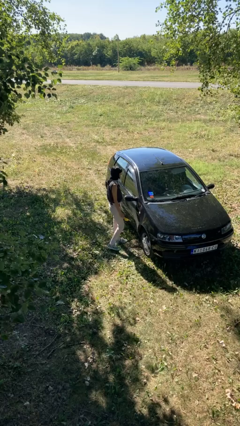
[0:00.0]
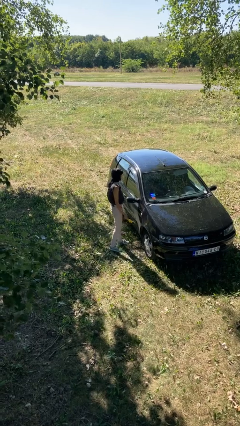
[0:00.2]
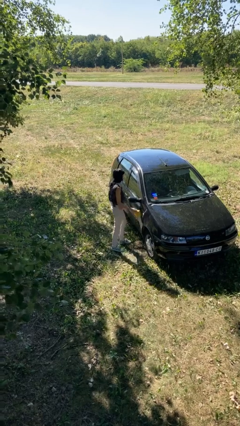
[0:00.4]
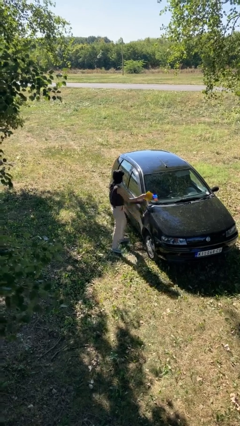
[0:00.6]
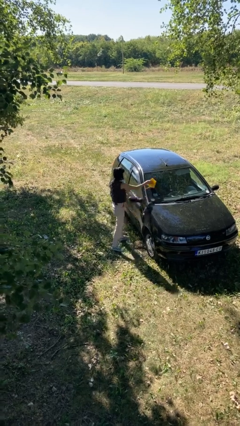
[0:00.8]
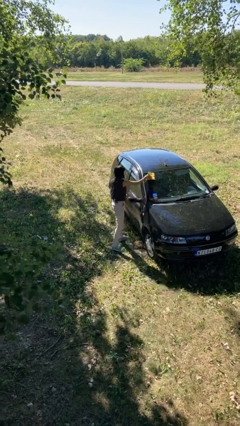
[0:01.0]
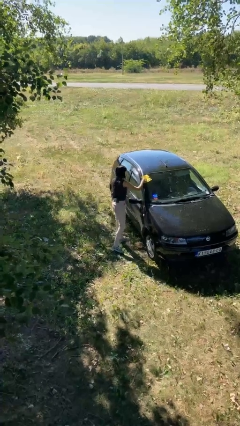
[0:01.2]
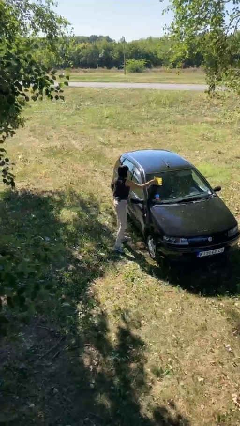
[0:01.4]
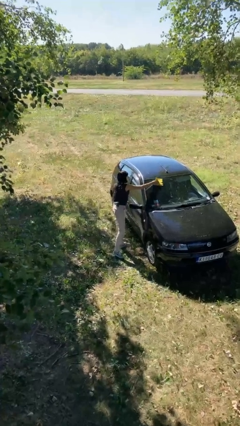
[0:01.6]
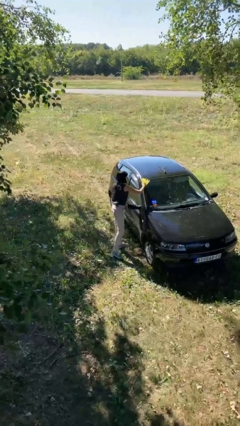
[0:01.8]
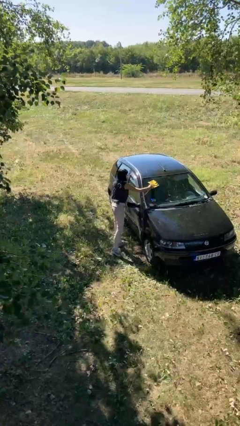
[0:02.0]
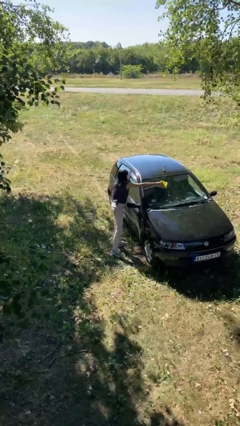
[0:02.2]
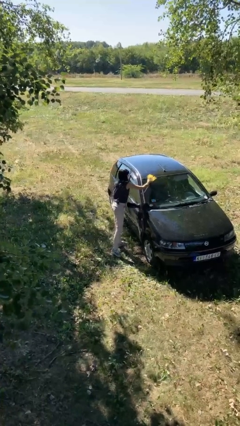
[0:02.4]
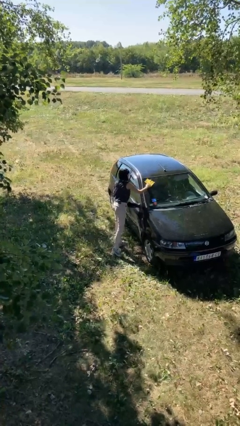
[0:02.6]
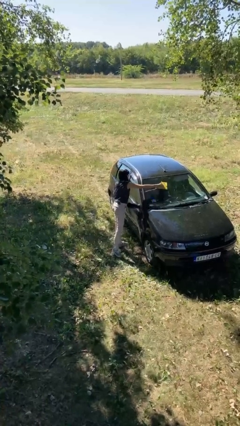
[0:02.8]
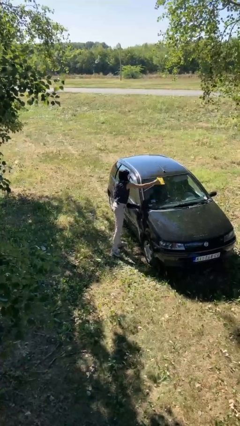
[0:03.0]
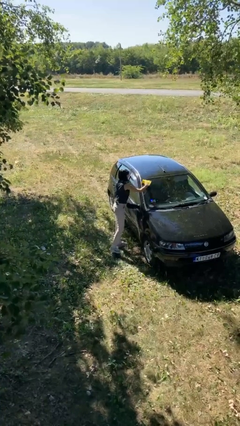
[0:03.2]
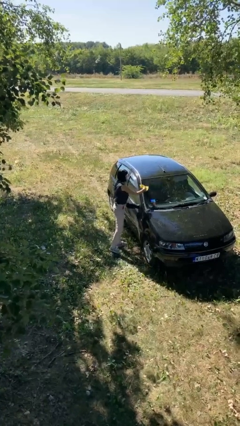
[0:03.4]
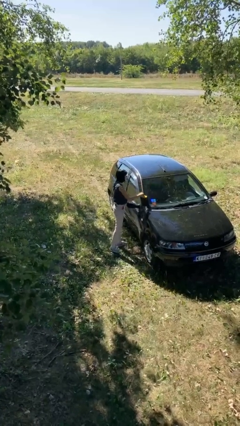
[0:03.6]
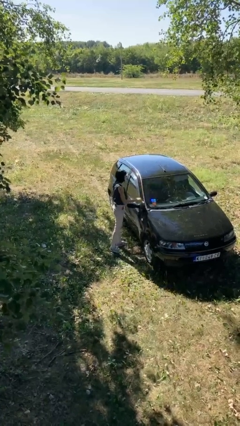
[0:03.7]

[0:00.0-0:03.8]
person polishes car with rag

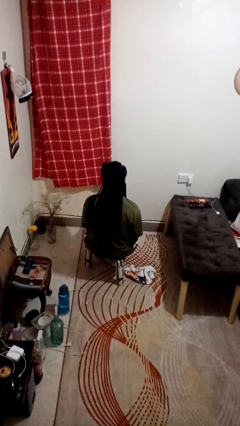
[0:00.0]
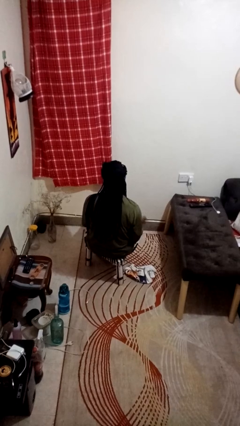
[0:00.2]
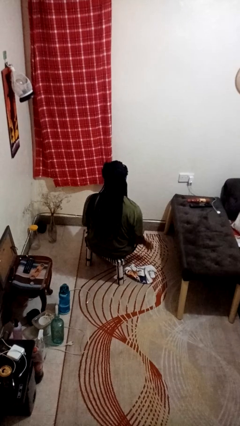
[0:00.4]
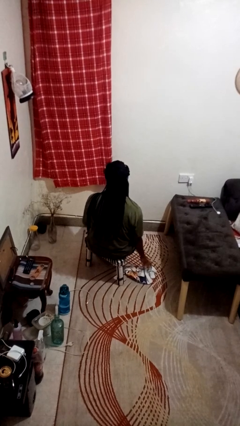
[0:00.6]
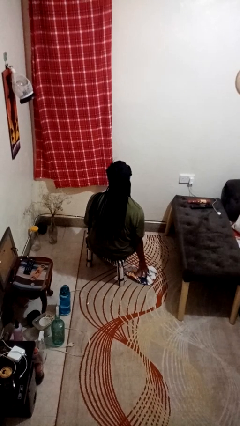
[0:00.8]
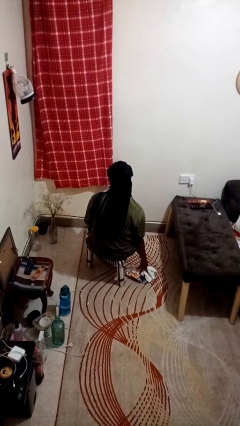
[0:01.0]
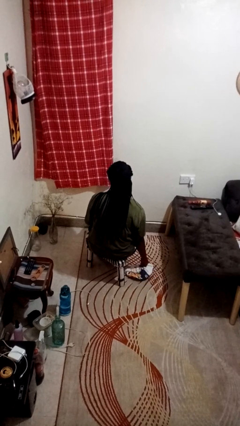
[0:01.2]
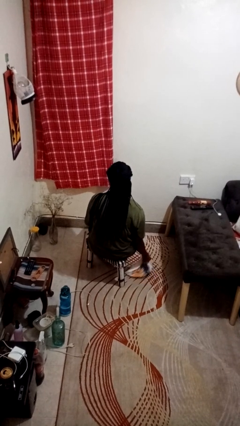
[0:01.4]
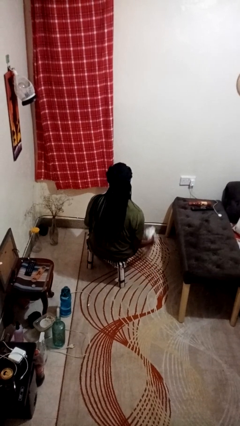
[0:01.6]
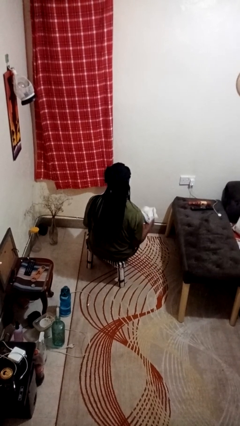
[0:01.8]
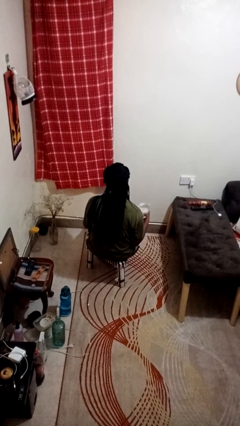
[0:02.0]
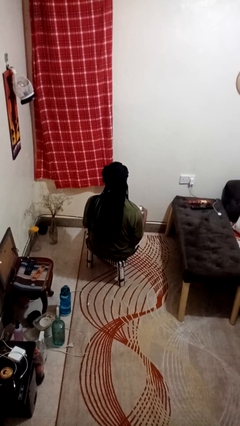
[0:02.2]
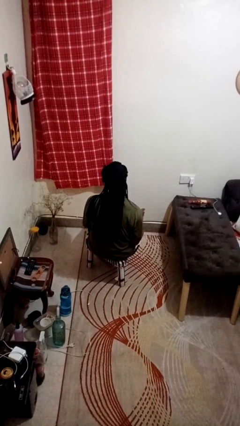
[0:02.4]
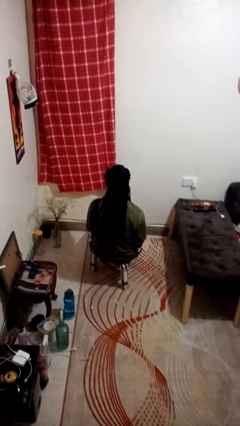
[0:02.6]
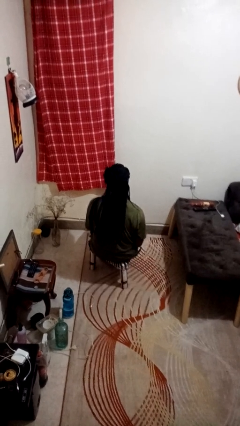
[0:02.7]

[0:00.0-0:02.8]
person picks up object from floor

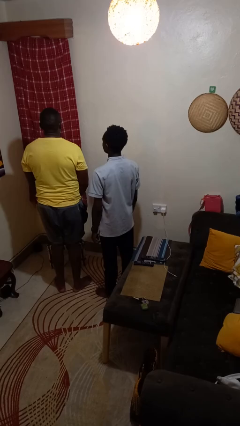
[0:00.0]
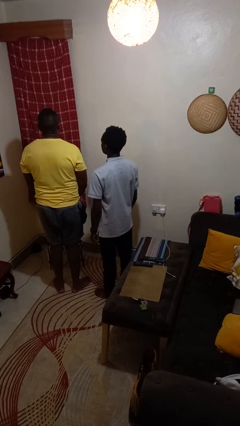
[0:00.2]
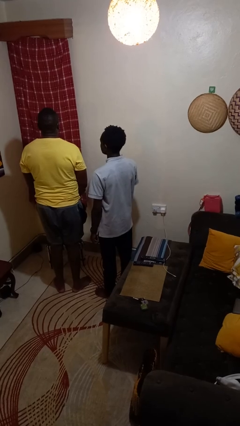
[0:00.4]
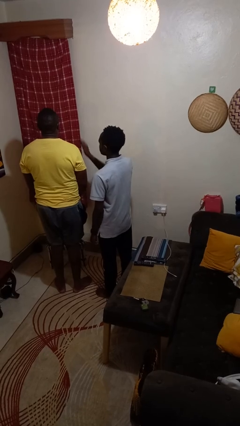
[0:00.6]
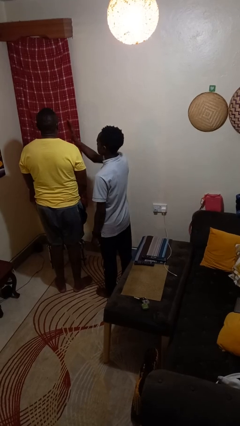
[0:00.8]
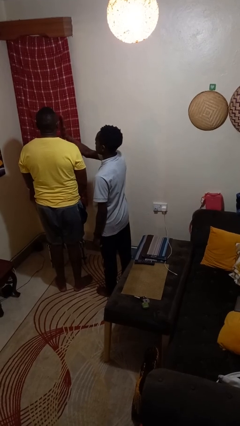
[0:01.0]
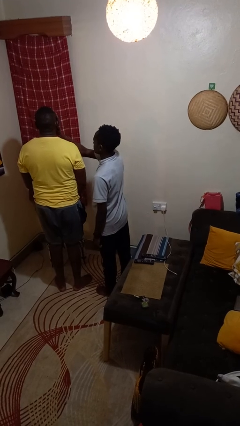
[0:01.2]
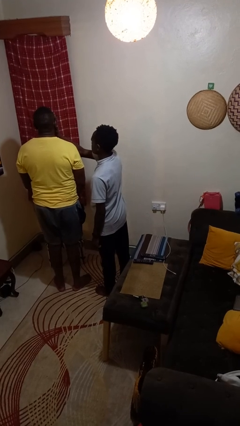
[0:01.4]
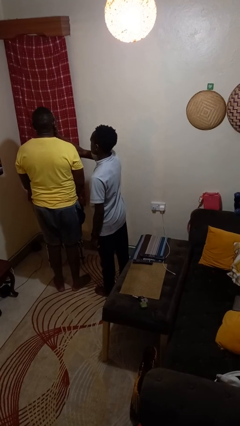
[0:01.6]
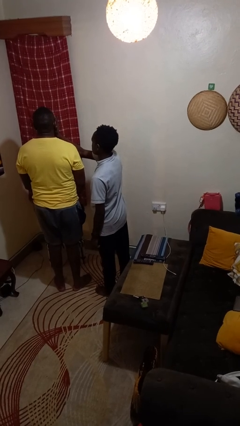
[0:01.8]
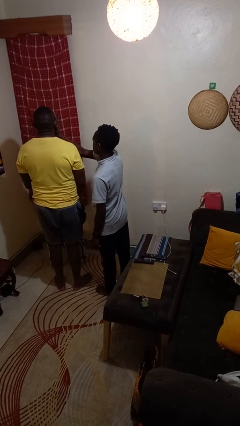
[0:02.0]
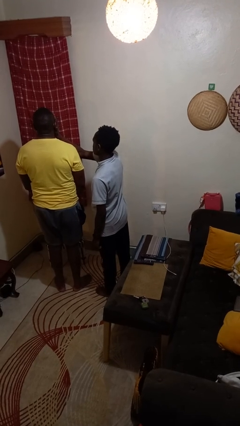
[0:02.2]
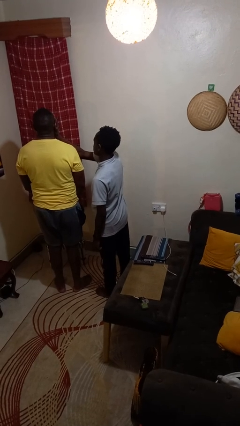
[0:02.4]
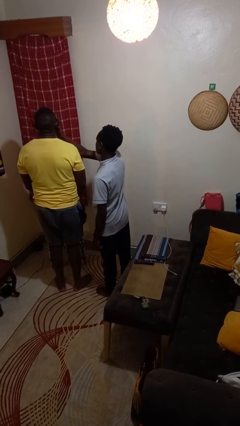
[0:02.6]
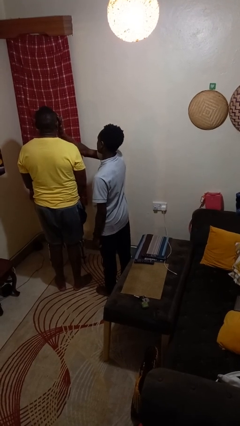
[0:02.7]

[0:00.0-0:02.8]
person touches face of person

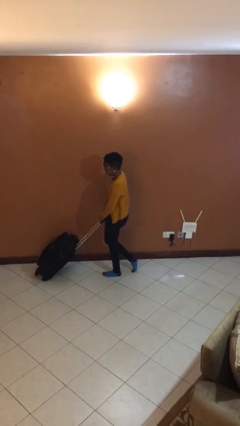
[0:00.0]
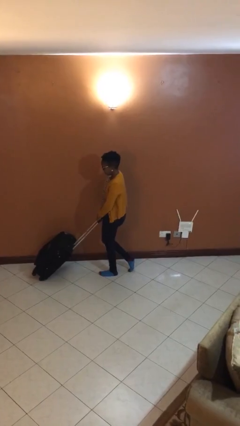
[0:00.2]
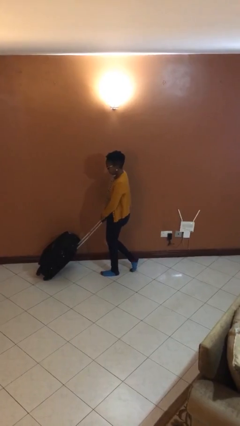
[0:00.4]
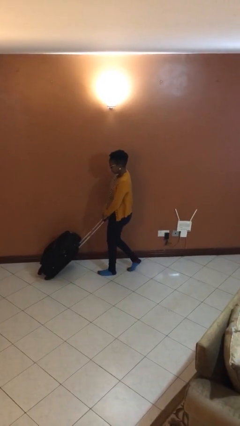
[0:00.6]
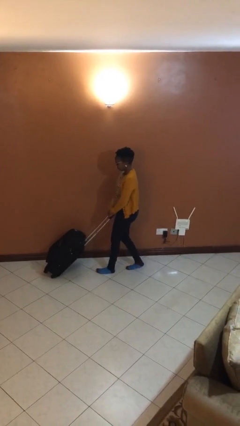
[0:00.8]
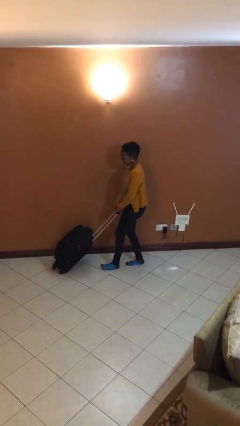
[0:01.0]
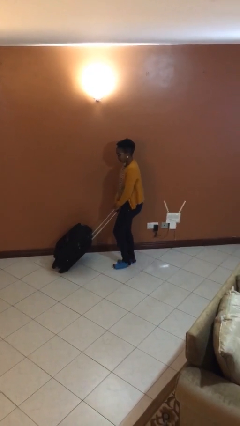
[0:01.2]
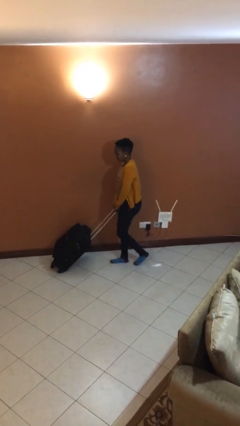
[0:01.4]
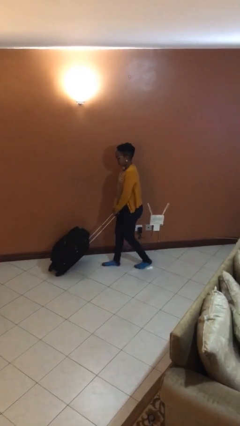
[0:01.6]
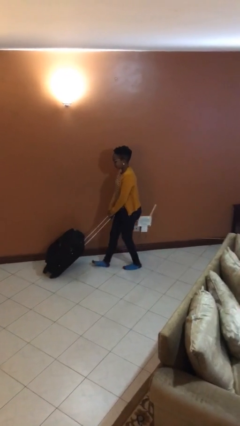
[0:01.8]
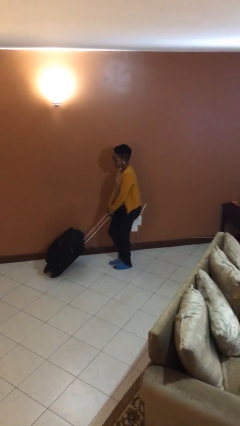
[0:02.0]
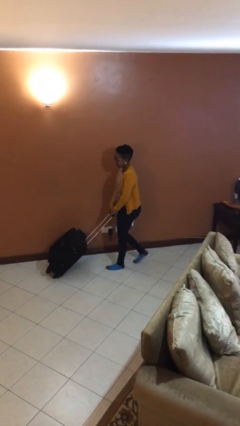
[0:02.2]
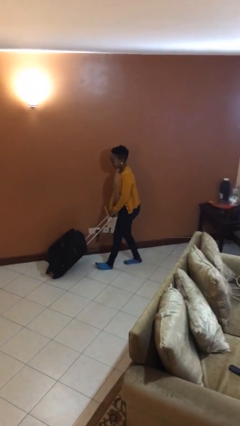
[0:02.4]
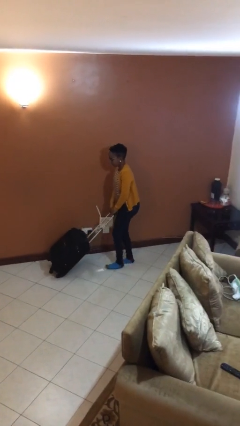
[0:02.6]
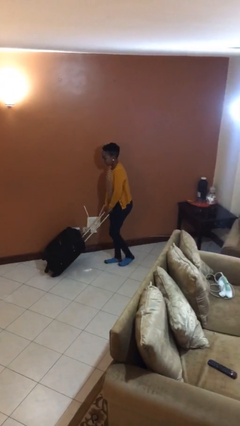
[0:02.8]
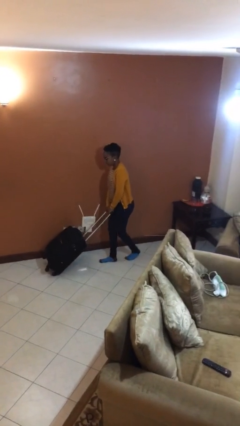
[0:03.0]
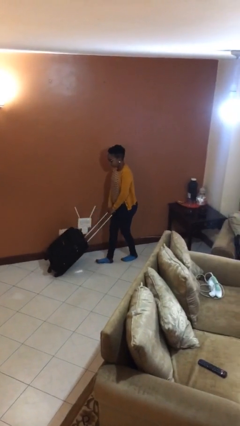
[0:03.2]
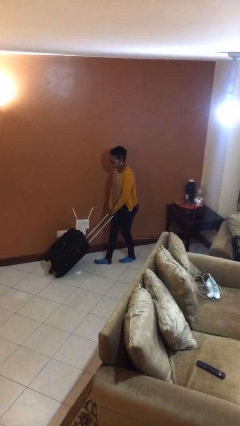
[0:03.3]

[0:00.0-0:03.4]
person pulls wheeled cart

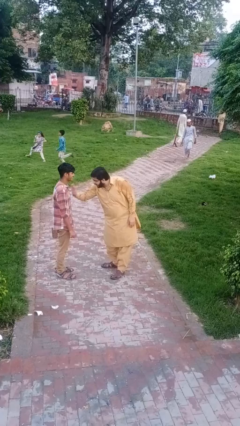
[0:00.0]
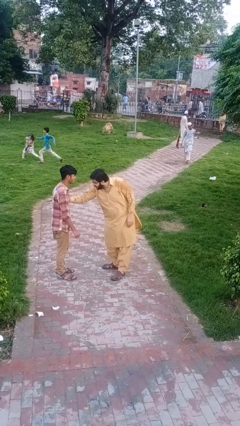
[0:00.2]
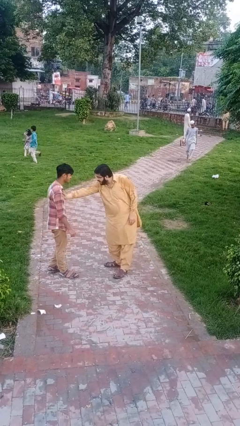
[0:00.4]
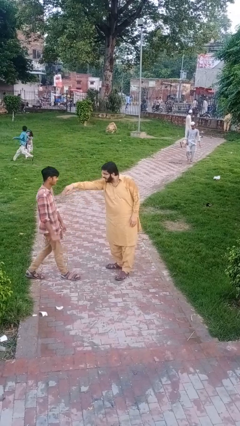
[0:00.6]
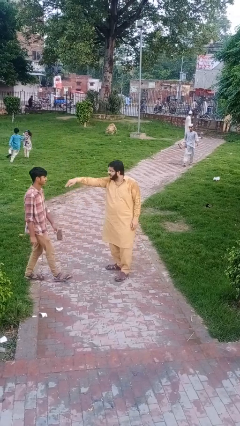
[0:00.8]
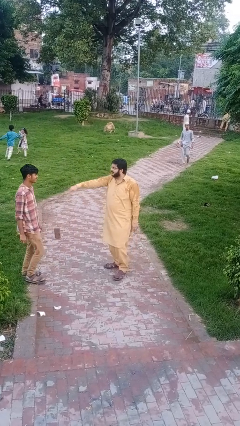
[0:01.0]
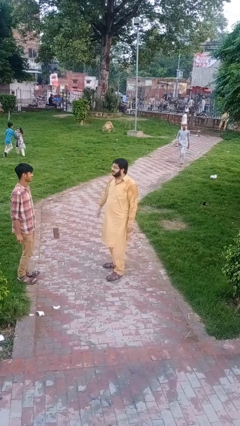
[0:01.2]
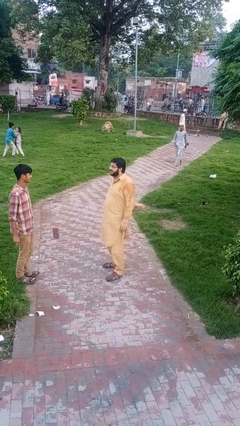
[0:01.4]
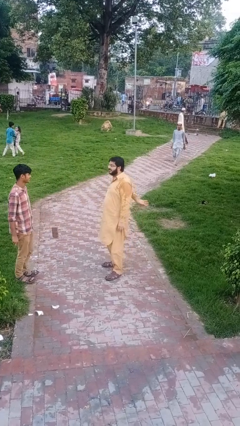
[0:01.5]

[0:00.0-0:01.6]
person shoves person

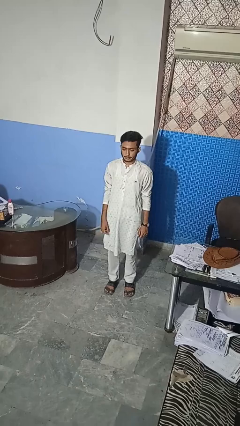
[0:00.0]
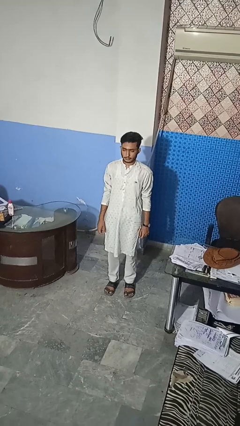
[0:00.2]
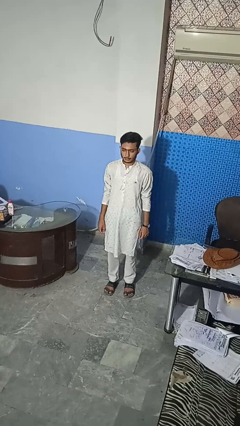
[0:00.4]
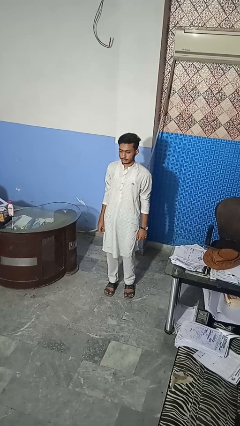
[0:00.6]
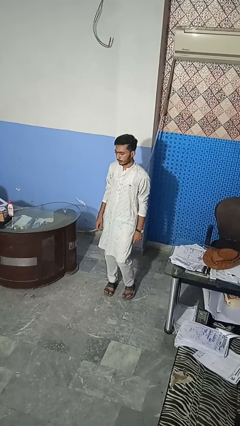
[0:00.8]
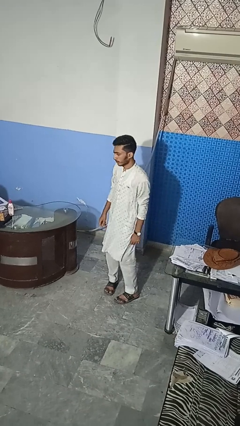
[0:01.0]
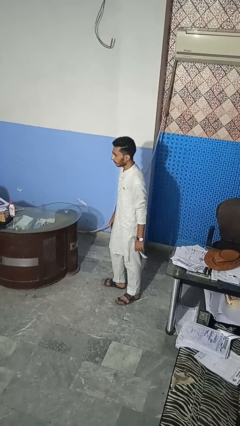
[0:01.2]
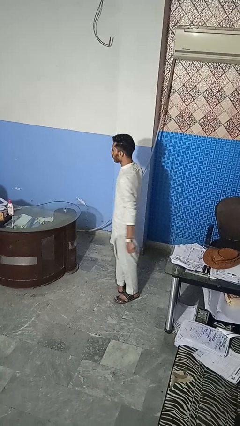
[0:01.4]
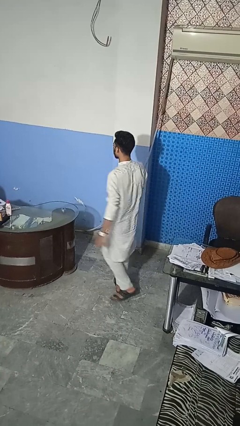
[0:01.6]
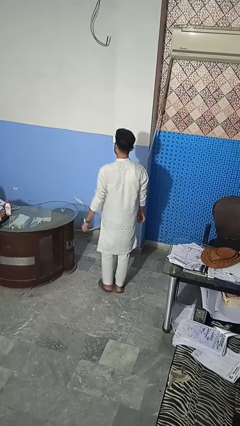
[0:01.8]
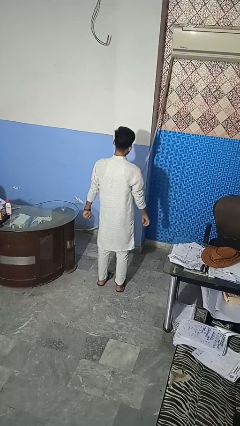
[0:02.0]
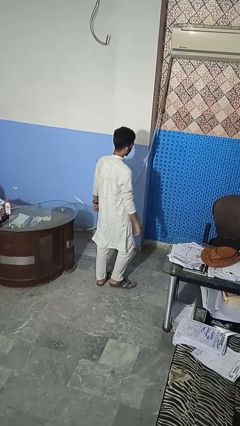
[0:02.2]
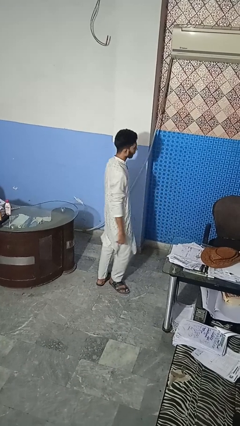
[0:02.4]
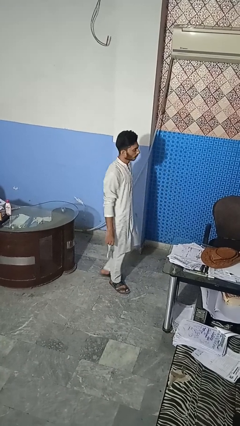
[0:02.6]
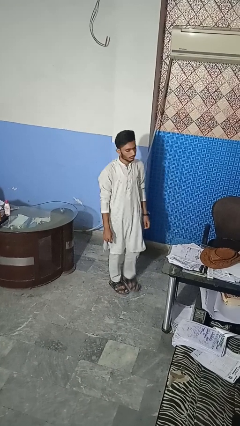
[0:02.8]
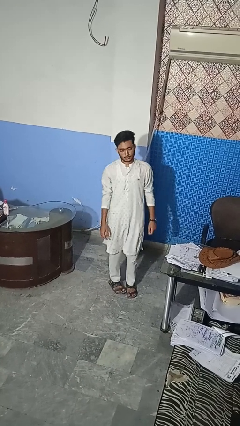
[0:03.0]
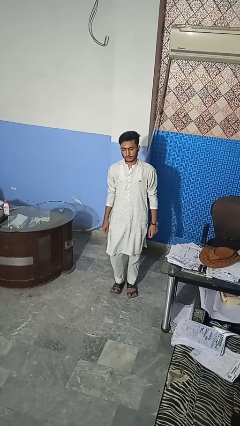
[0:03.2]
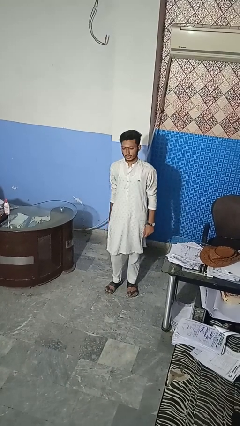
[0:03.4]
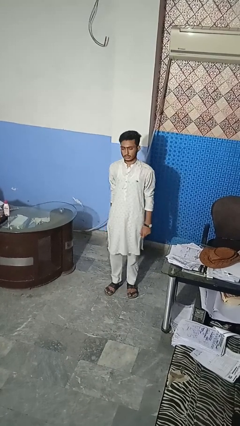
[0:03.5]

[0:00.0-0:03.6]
person twirls
